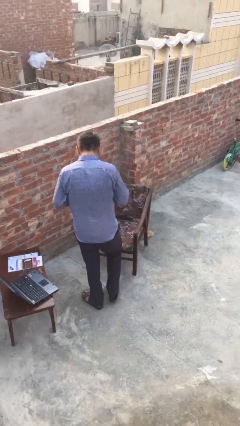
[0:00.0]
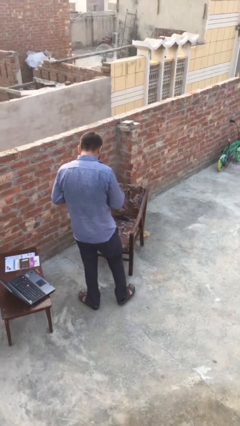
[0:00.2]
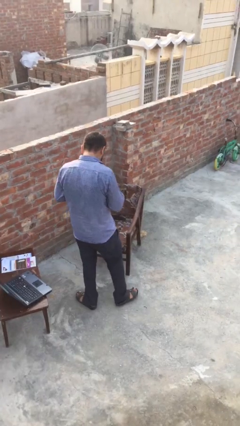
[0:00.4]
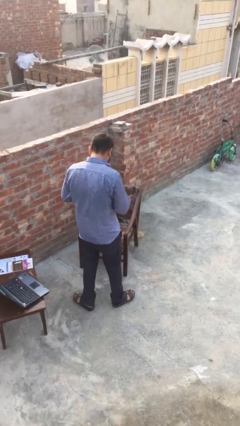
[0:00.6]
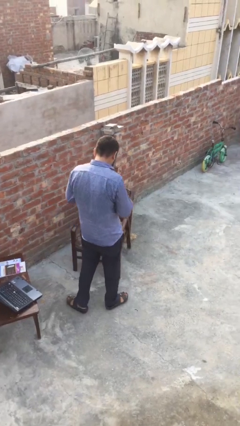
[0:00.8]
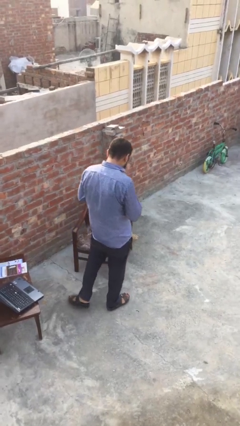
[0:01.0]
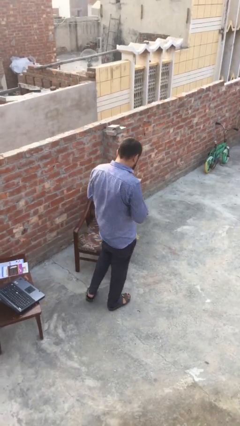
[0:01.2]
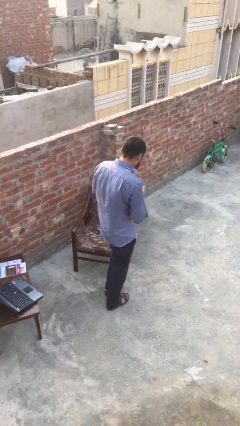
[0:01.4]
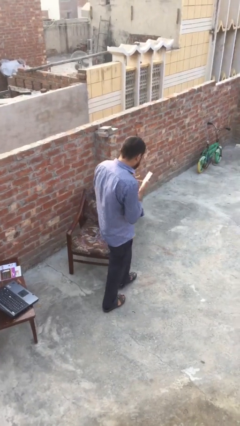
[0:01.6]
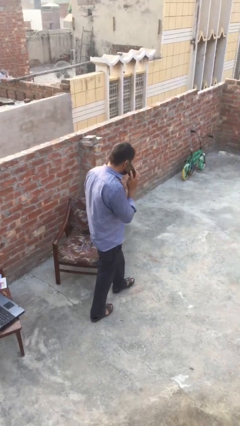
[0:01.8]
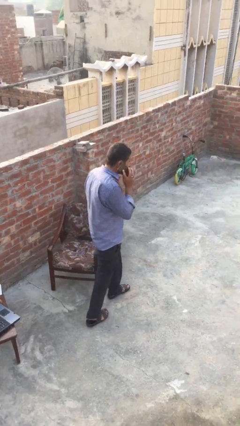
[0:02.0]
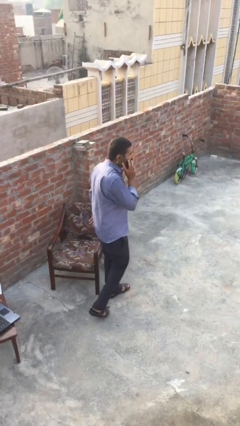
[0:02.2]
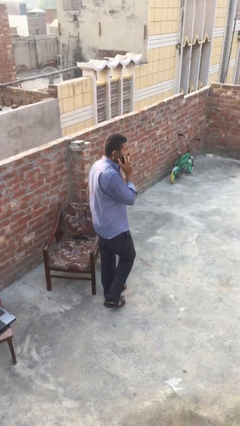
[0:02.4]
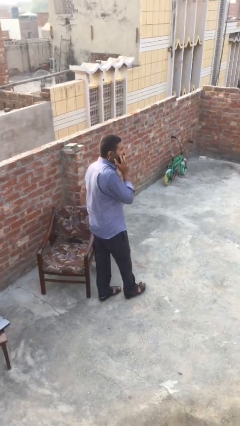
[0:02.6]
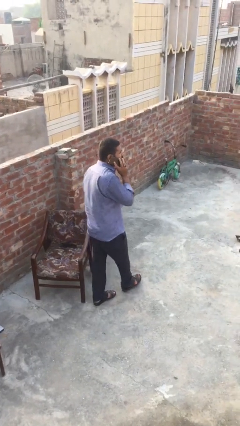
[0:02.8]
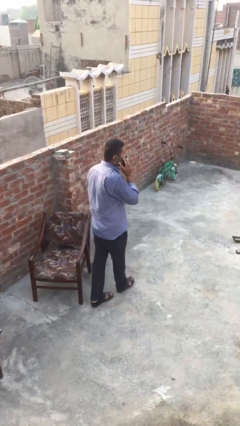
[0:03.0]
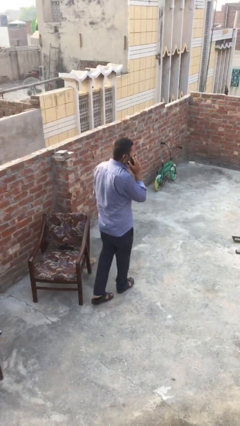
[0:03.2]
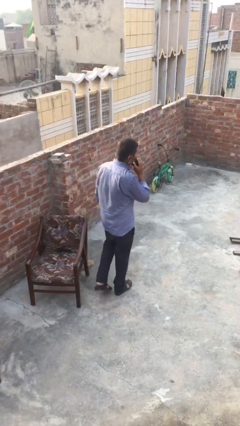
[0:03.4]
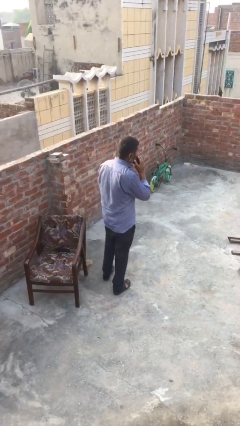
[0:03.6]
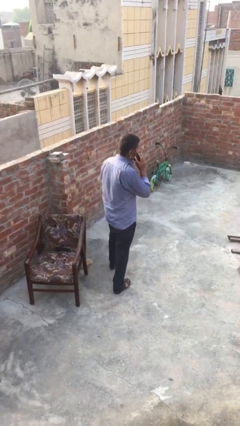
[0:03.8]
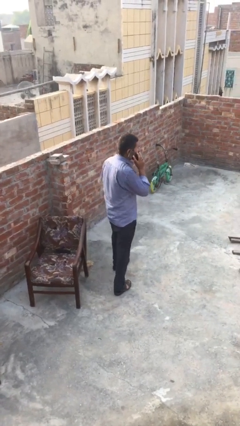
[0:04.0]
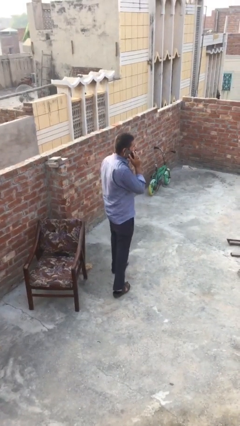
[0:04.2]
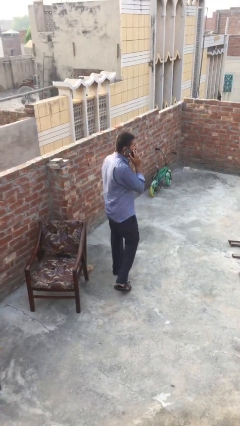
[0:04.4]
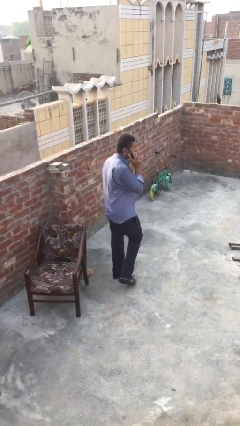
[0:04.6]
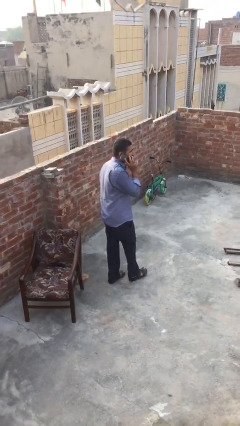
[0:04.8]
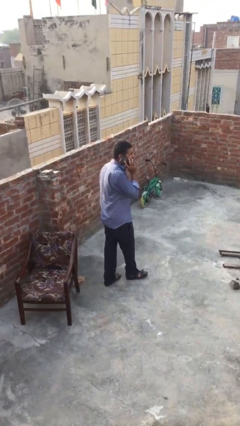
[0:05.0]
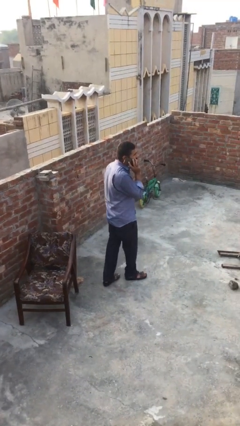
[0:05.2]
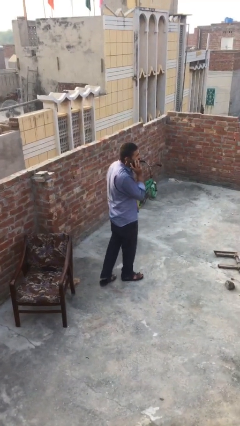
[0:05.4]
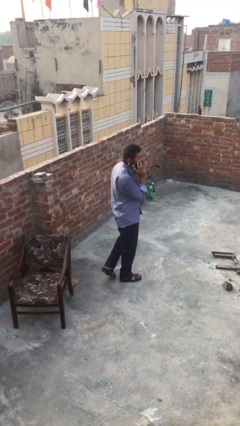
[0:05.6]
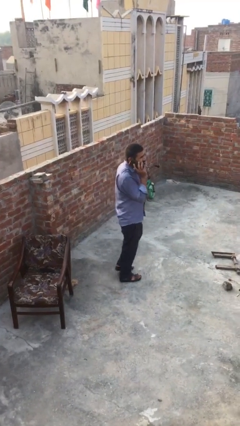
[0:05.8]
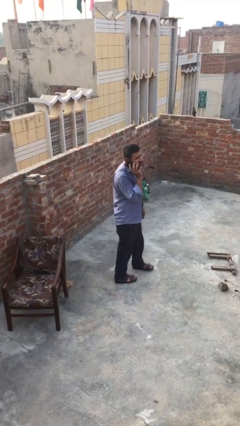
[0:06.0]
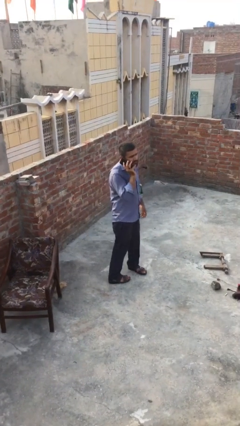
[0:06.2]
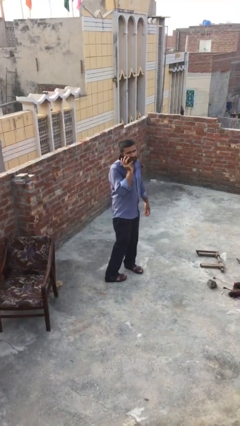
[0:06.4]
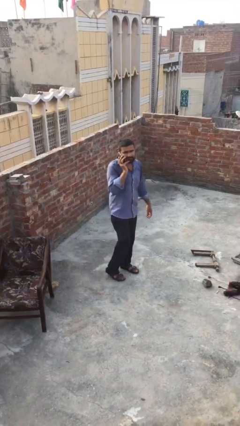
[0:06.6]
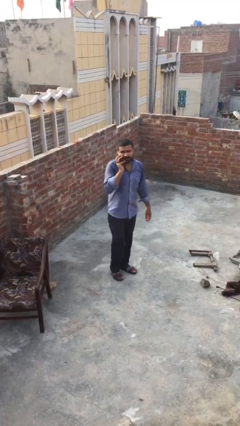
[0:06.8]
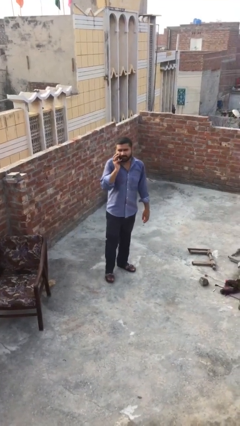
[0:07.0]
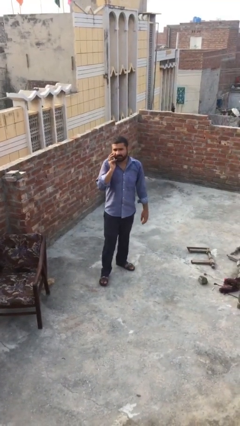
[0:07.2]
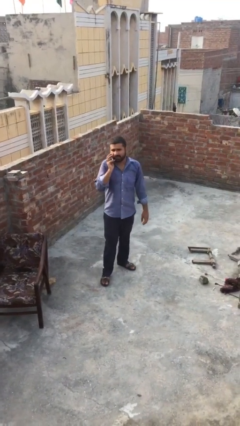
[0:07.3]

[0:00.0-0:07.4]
person talks on phone

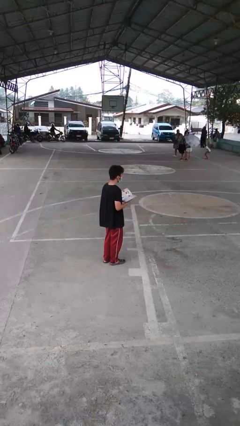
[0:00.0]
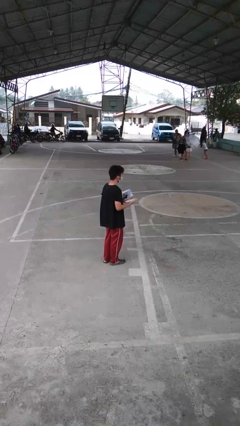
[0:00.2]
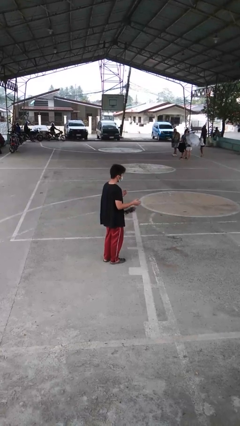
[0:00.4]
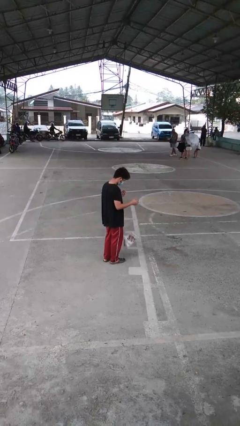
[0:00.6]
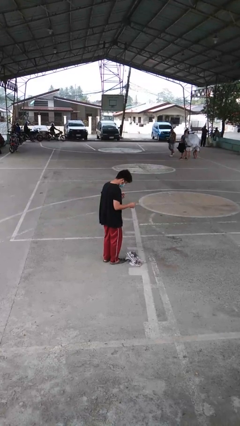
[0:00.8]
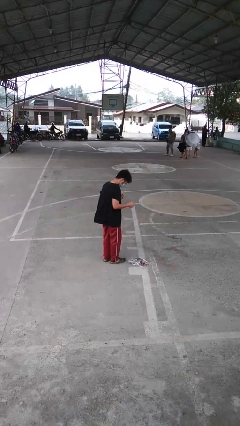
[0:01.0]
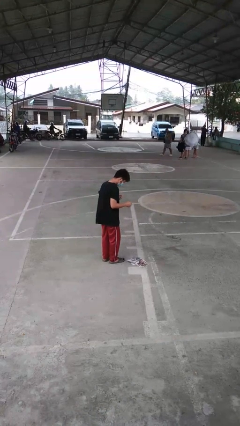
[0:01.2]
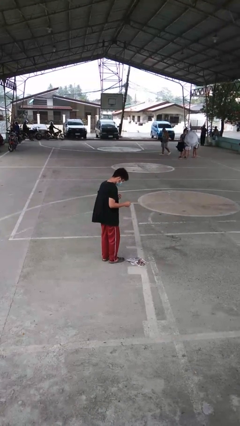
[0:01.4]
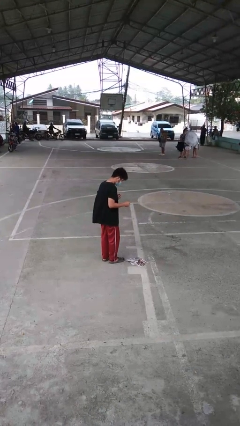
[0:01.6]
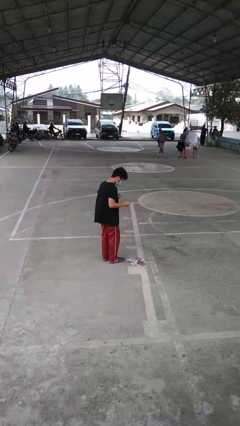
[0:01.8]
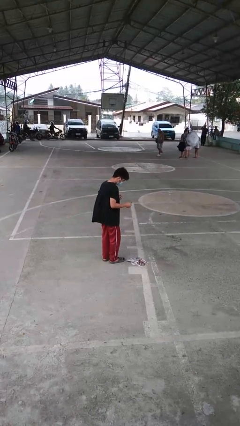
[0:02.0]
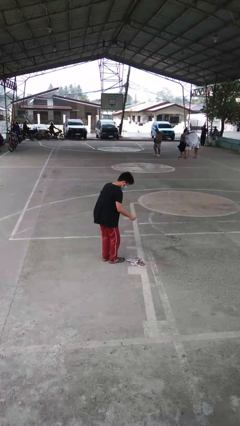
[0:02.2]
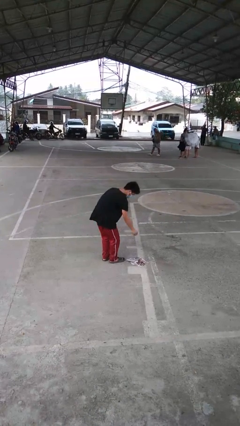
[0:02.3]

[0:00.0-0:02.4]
person drops object

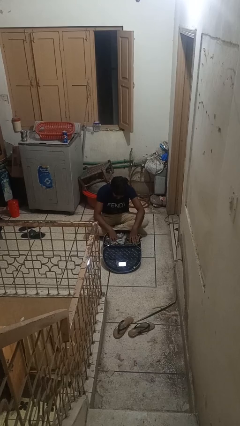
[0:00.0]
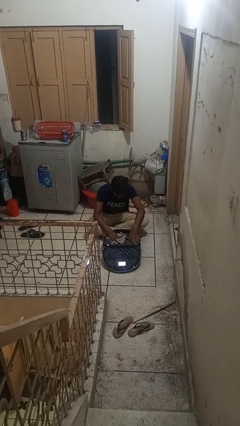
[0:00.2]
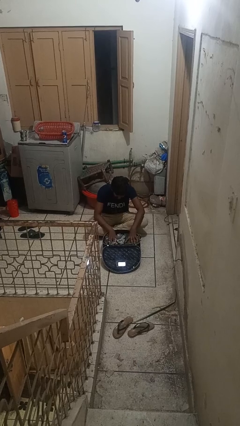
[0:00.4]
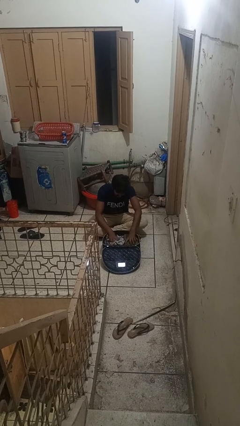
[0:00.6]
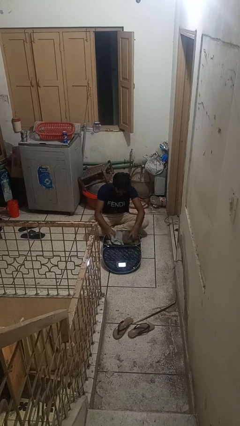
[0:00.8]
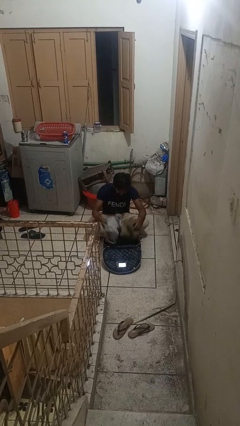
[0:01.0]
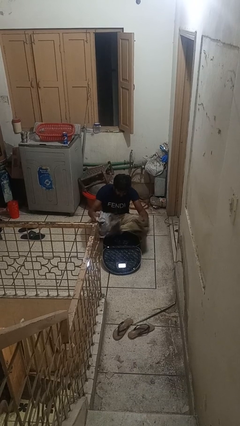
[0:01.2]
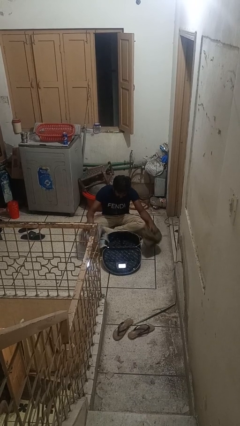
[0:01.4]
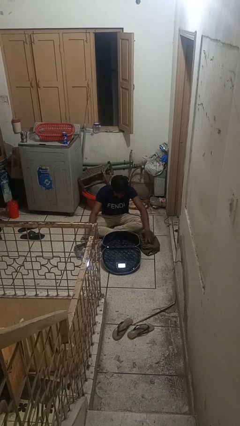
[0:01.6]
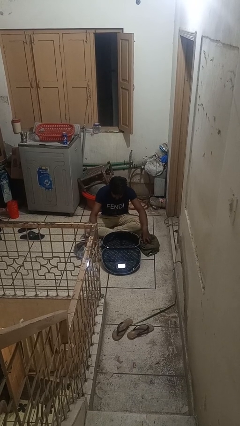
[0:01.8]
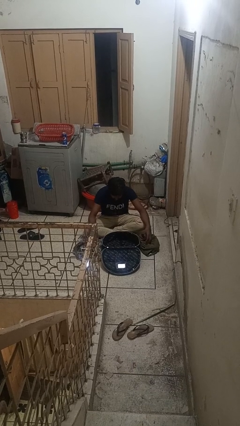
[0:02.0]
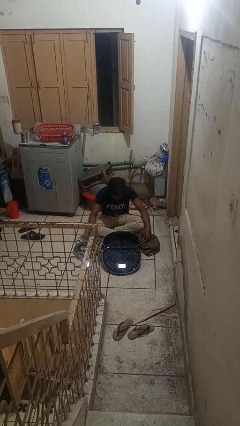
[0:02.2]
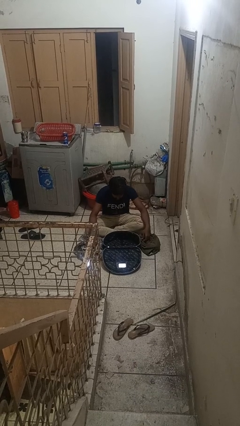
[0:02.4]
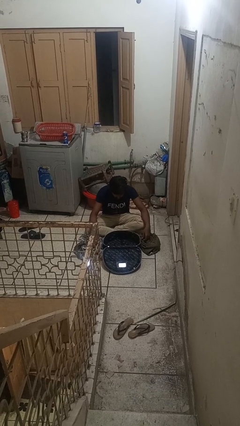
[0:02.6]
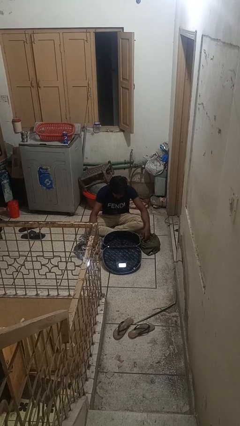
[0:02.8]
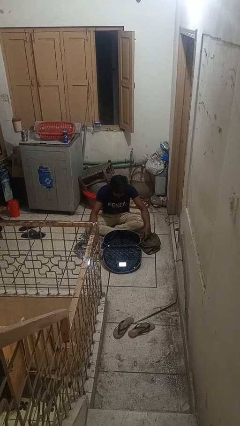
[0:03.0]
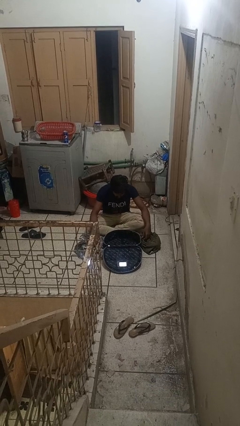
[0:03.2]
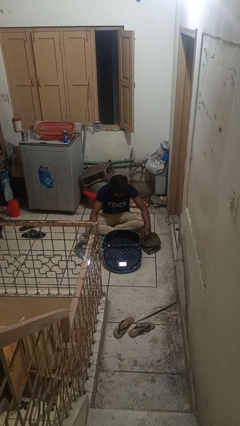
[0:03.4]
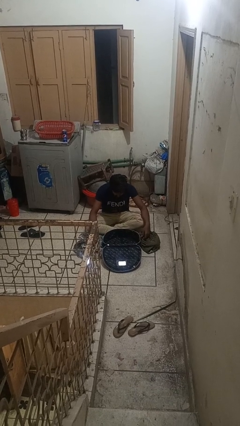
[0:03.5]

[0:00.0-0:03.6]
person unloads clothes from suitcase

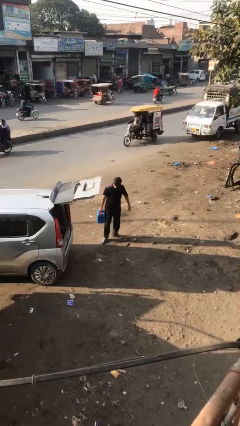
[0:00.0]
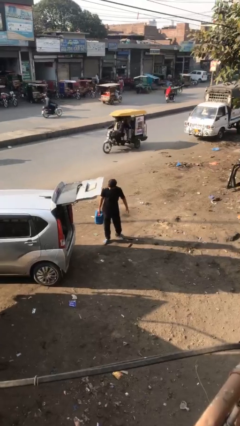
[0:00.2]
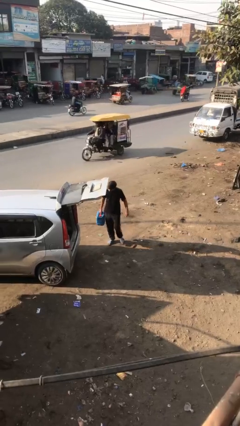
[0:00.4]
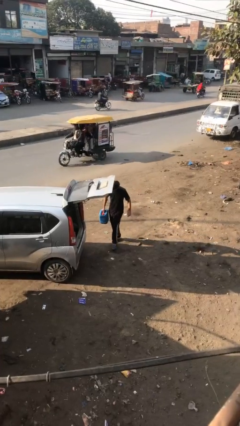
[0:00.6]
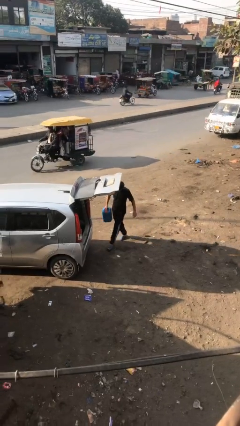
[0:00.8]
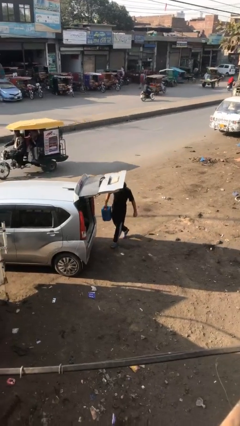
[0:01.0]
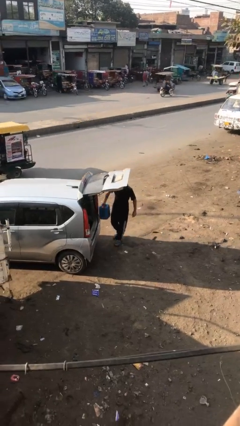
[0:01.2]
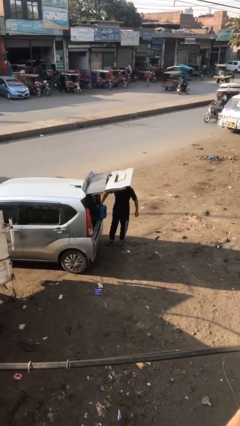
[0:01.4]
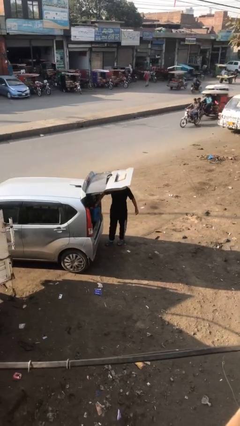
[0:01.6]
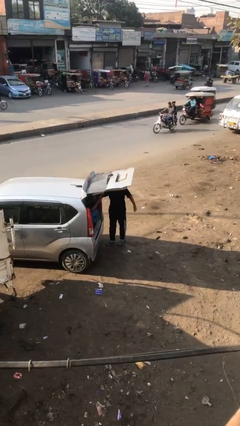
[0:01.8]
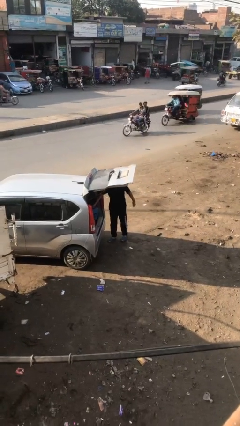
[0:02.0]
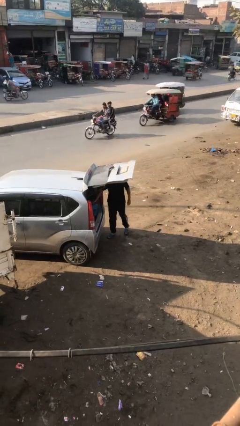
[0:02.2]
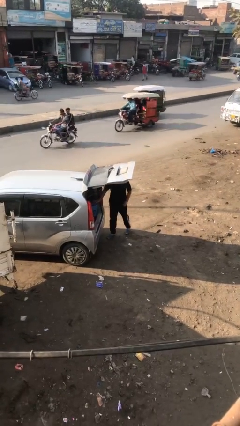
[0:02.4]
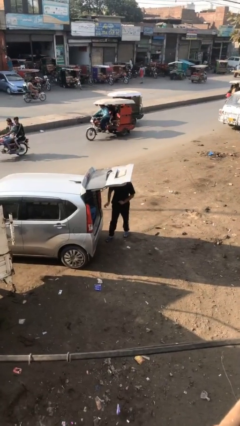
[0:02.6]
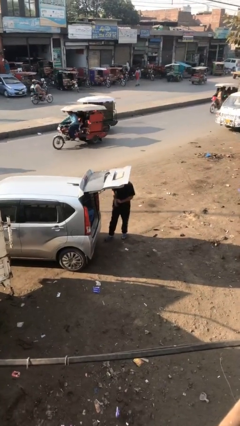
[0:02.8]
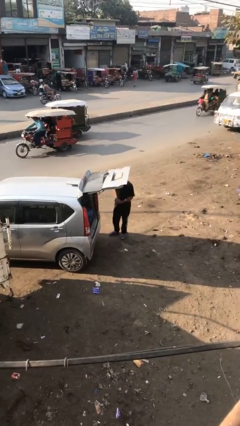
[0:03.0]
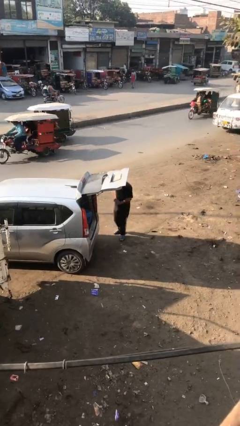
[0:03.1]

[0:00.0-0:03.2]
person loads car

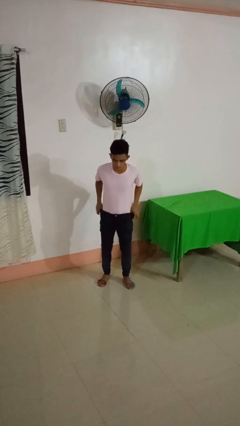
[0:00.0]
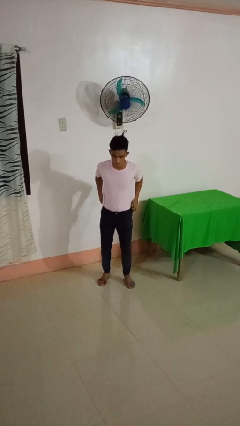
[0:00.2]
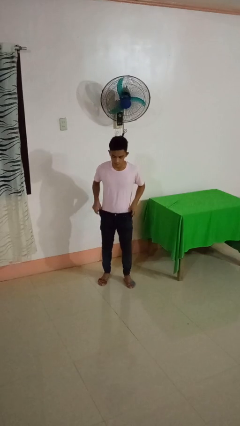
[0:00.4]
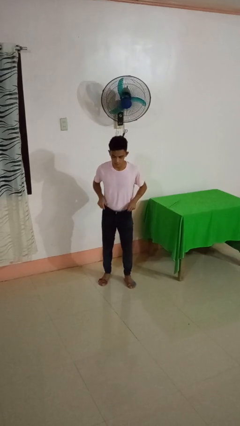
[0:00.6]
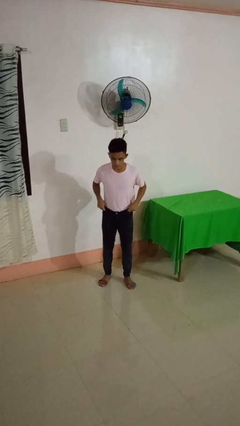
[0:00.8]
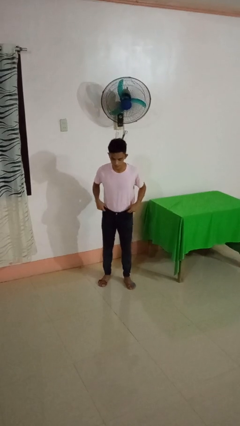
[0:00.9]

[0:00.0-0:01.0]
person hikes up pants

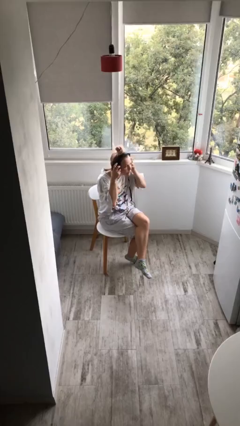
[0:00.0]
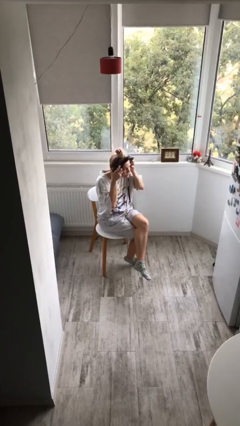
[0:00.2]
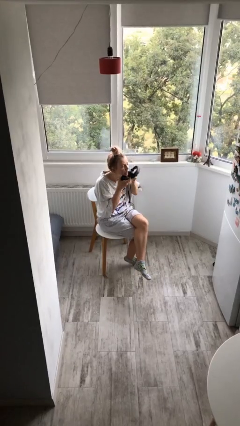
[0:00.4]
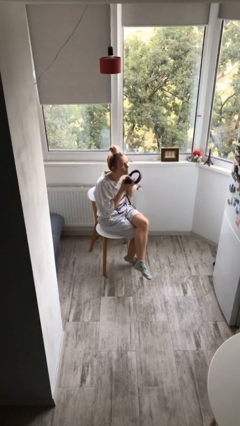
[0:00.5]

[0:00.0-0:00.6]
person takes off headphones
